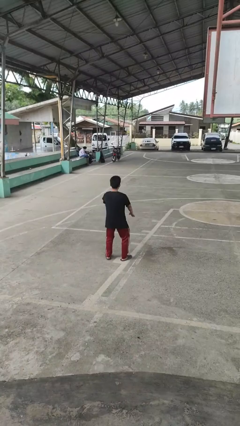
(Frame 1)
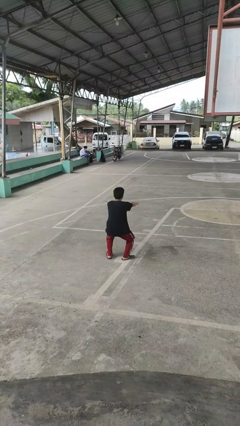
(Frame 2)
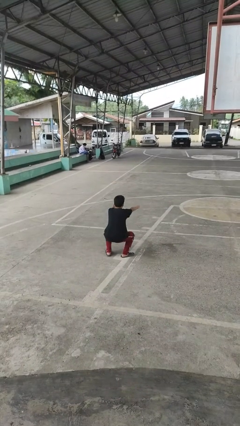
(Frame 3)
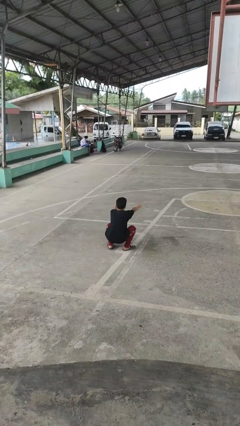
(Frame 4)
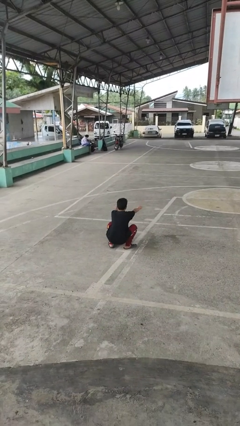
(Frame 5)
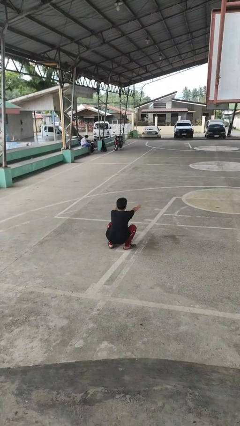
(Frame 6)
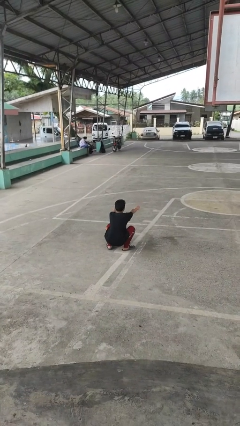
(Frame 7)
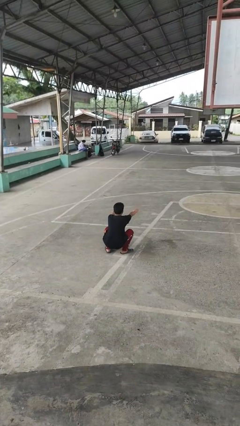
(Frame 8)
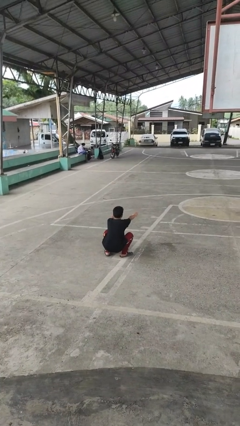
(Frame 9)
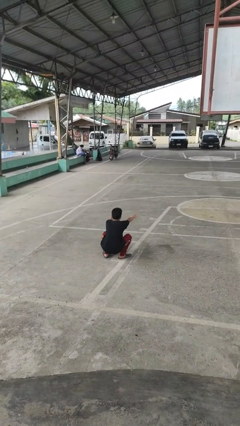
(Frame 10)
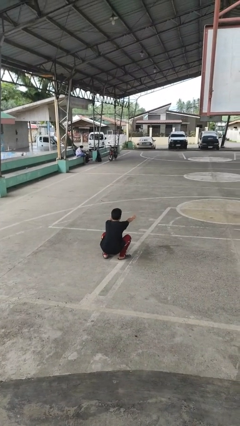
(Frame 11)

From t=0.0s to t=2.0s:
person squats

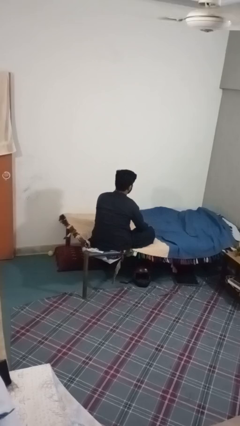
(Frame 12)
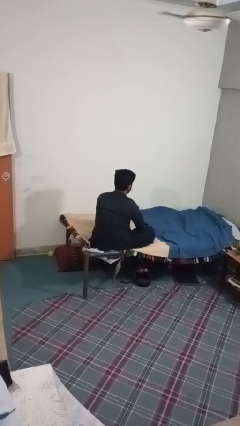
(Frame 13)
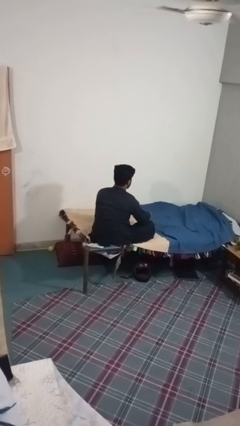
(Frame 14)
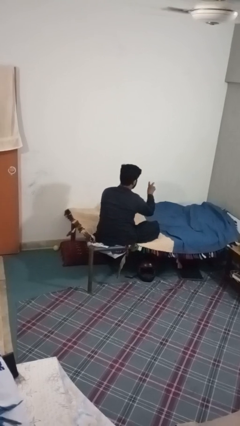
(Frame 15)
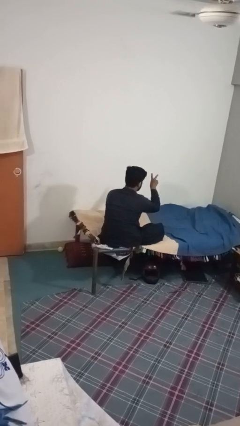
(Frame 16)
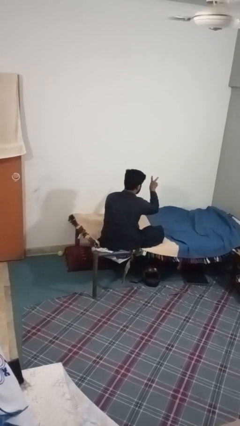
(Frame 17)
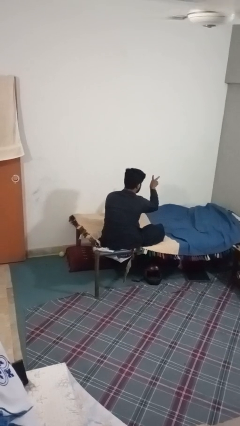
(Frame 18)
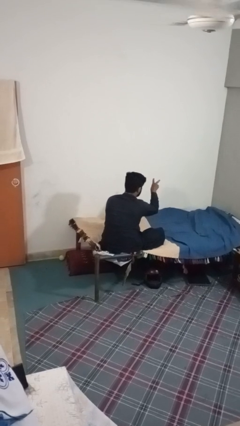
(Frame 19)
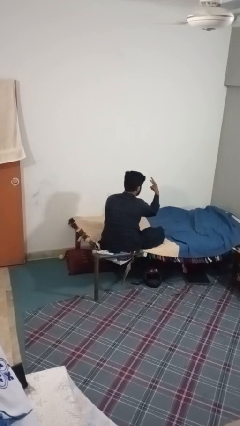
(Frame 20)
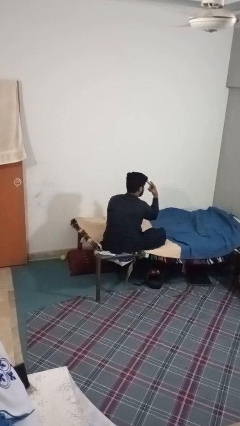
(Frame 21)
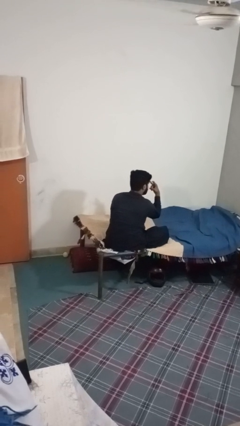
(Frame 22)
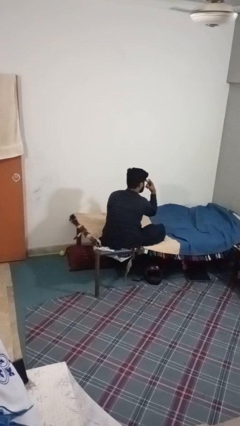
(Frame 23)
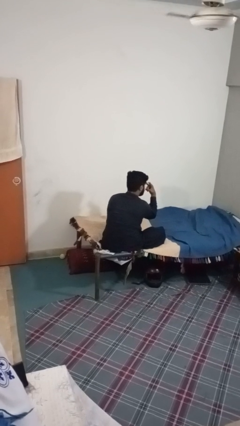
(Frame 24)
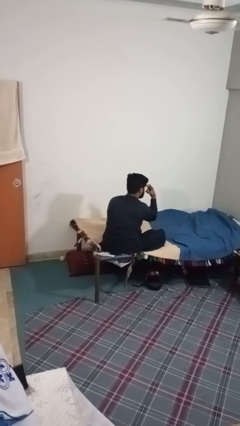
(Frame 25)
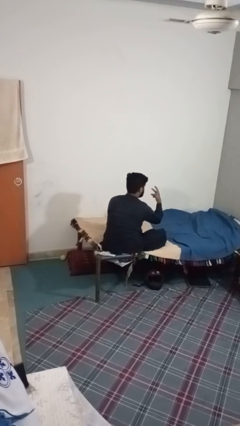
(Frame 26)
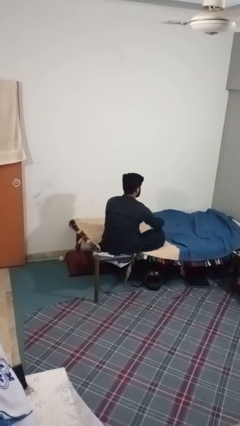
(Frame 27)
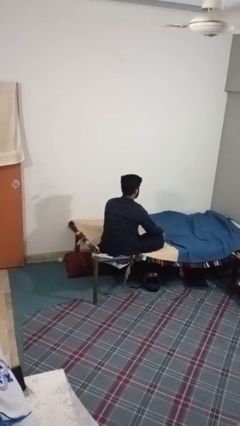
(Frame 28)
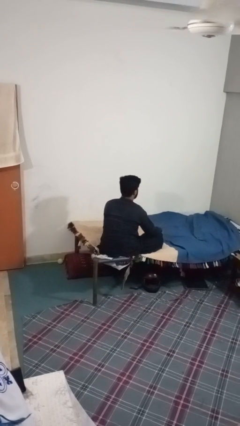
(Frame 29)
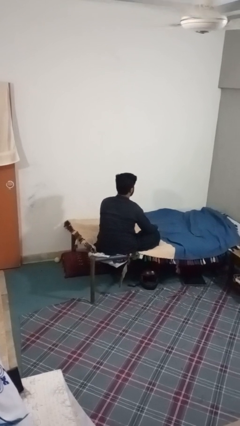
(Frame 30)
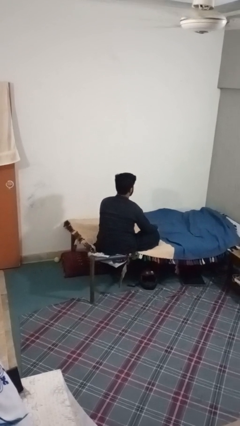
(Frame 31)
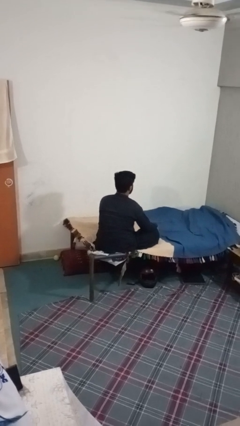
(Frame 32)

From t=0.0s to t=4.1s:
person gestures watch closely

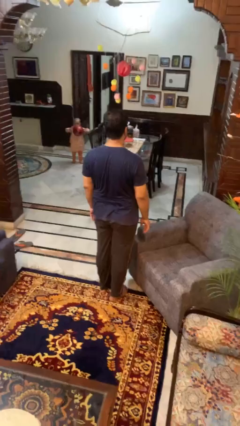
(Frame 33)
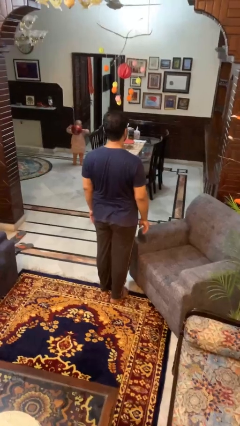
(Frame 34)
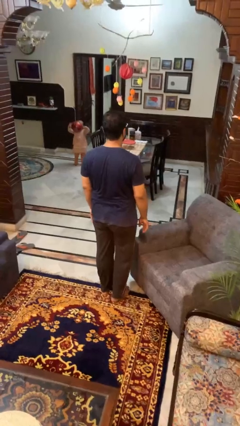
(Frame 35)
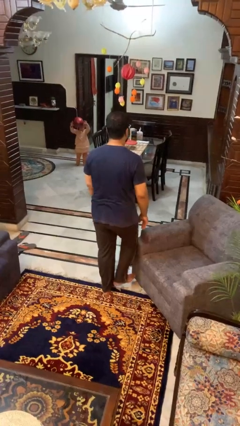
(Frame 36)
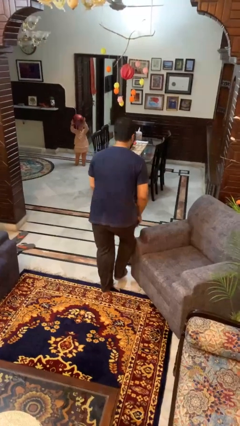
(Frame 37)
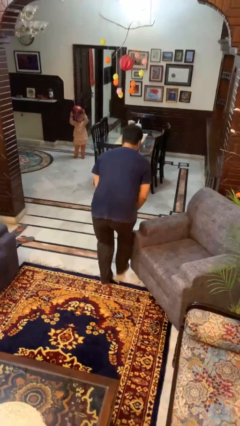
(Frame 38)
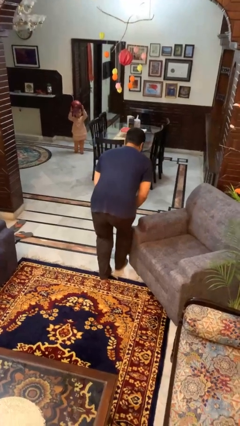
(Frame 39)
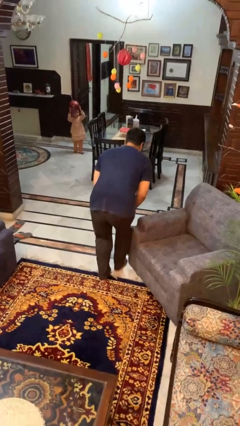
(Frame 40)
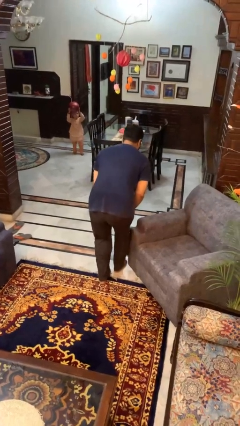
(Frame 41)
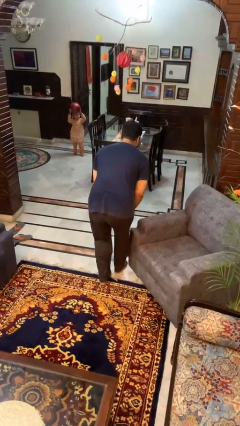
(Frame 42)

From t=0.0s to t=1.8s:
person stubs toe

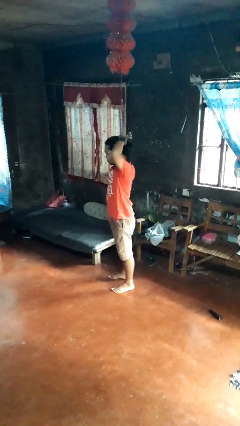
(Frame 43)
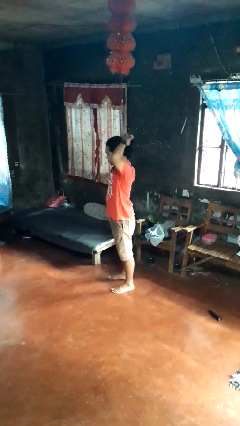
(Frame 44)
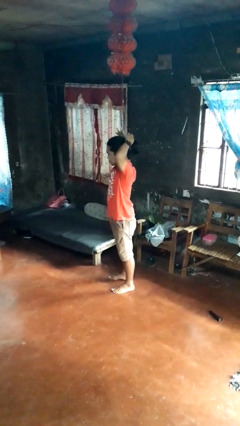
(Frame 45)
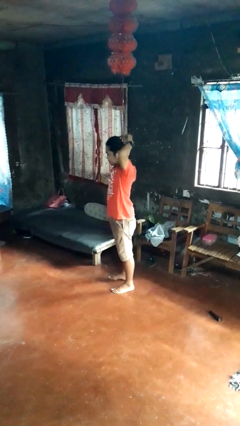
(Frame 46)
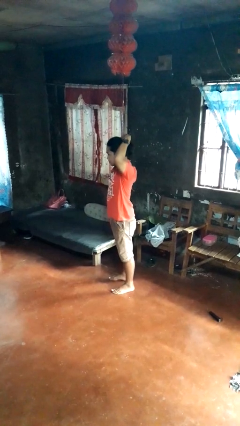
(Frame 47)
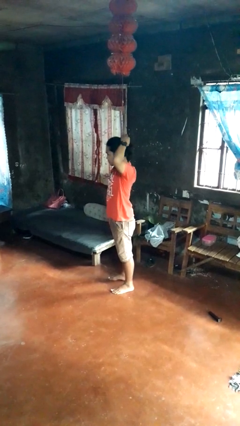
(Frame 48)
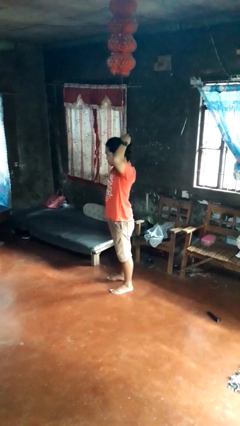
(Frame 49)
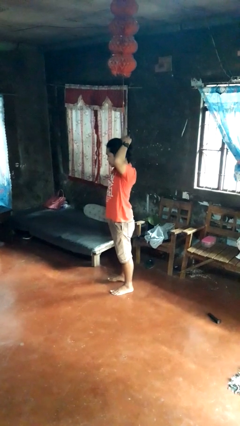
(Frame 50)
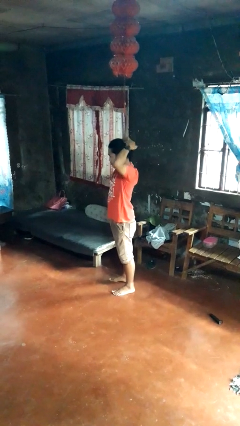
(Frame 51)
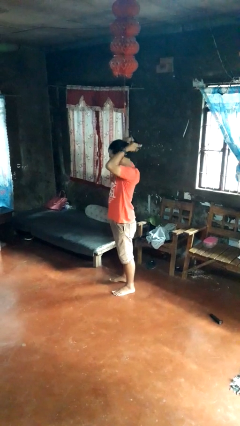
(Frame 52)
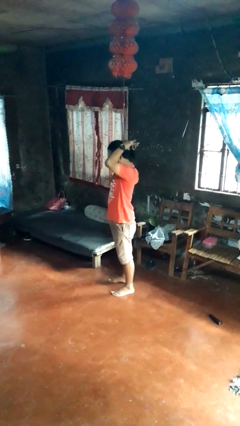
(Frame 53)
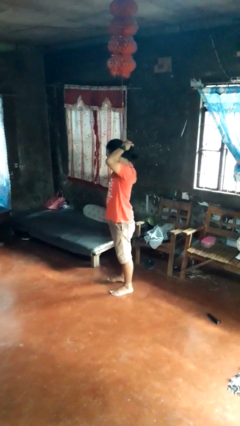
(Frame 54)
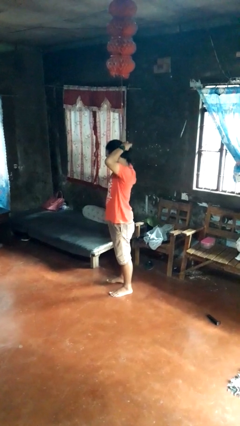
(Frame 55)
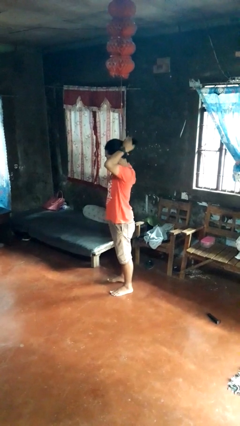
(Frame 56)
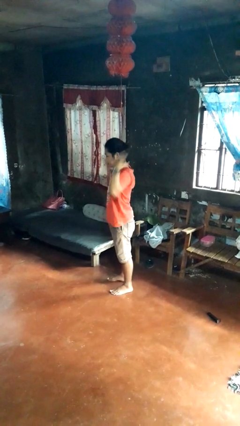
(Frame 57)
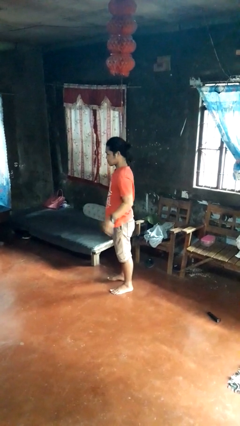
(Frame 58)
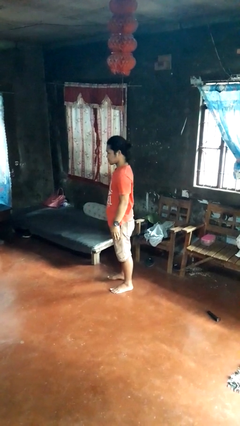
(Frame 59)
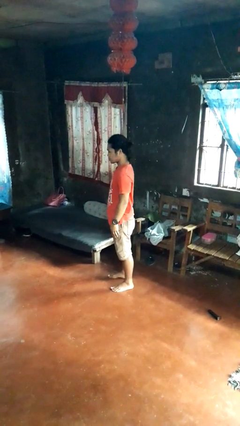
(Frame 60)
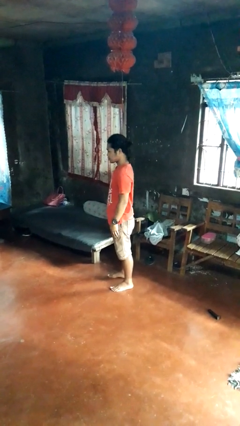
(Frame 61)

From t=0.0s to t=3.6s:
person puts hair in ponytail

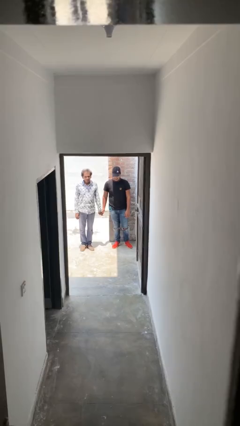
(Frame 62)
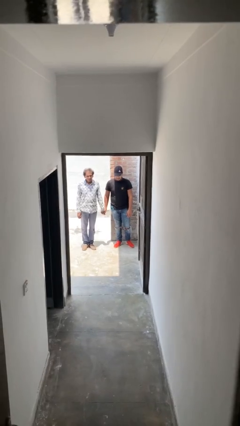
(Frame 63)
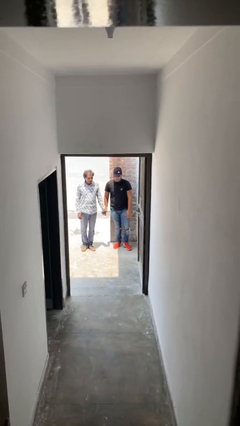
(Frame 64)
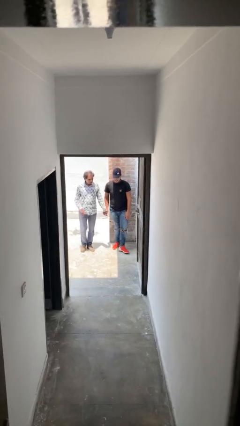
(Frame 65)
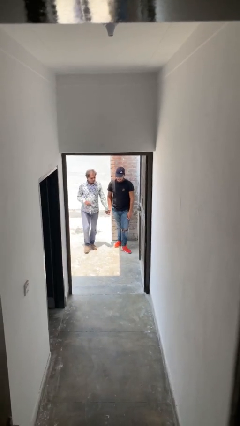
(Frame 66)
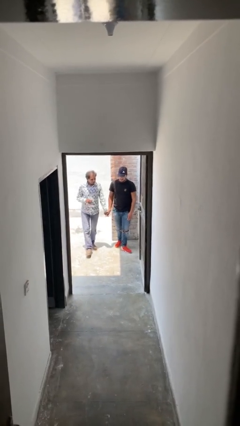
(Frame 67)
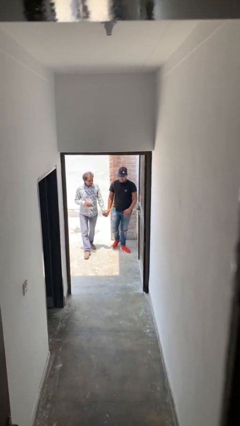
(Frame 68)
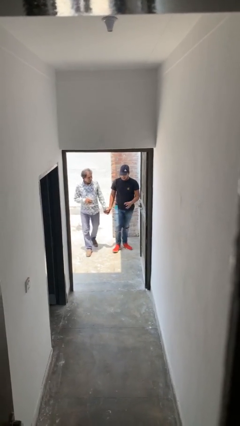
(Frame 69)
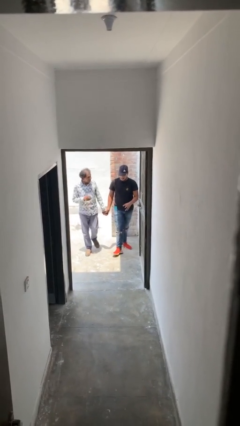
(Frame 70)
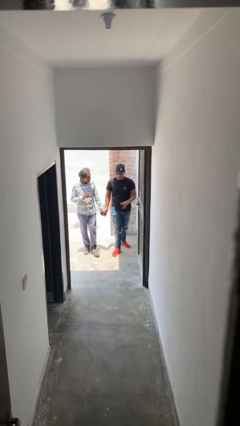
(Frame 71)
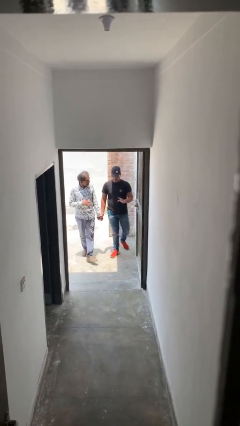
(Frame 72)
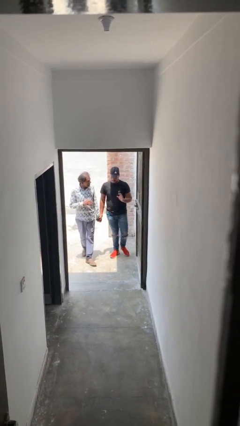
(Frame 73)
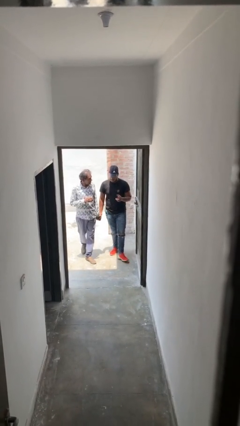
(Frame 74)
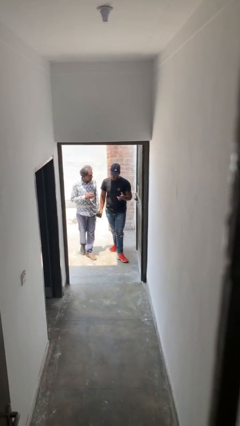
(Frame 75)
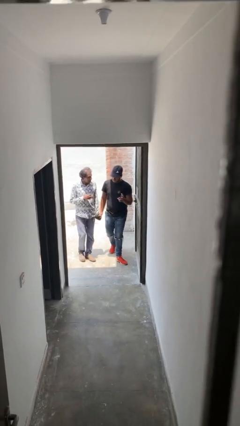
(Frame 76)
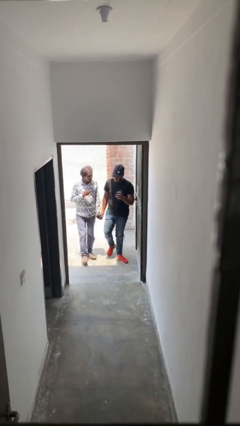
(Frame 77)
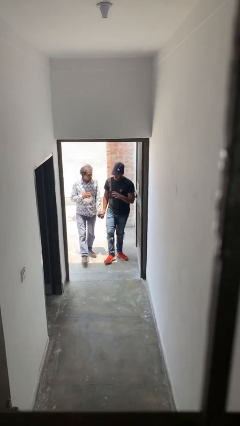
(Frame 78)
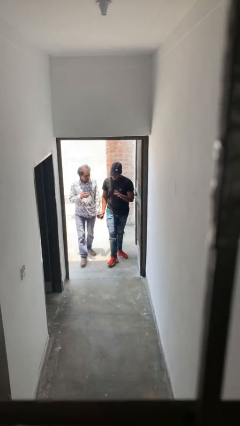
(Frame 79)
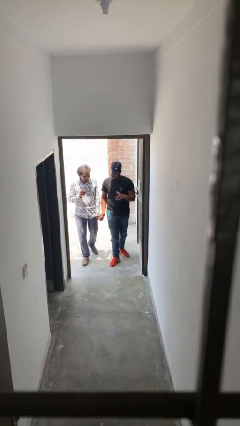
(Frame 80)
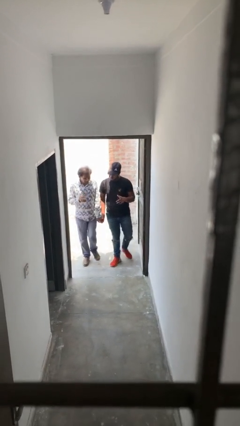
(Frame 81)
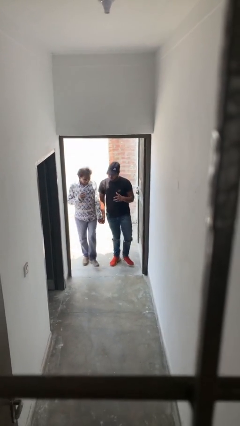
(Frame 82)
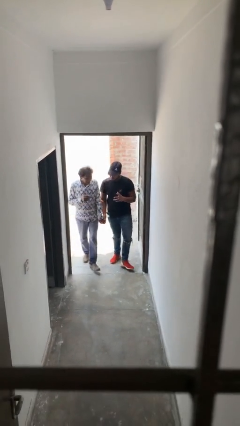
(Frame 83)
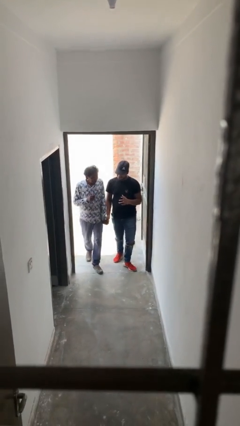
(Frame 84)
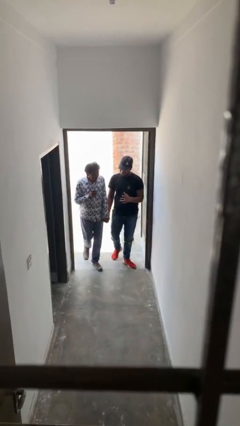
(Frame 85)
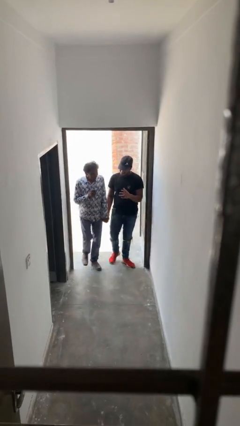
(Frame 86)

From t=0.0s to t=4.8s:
person holds hand

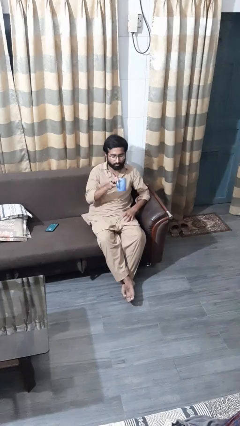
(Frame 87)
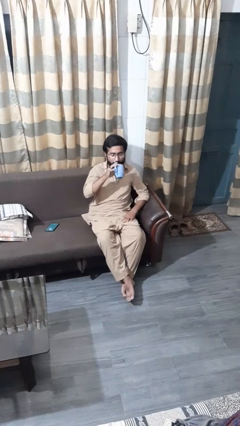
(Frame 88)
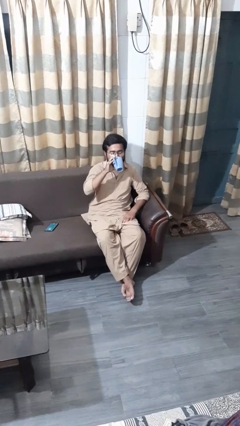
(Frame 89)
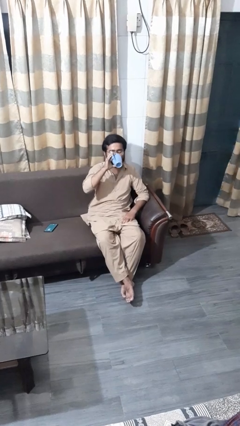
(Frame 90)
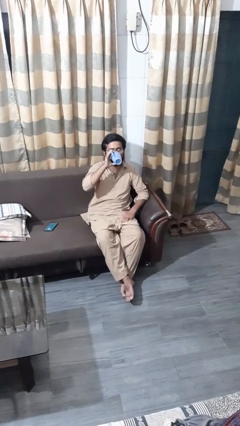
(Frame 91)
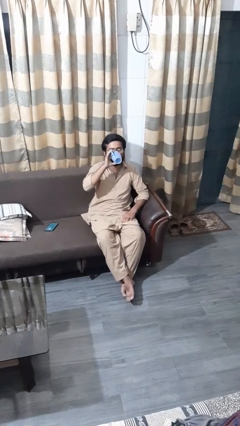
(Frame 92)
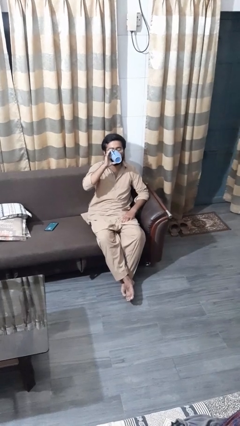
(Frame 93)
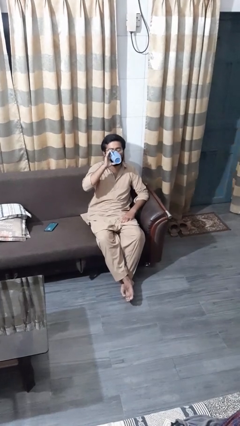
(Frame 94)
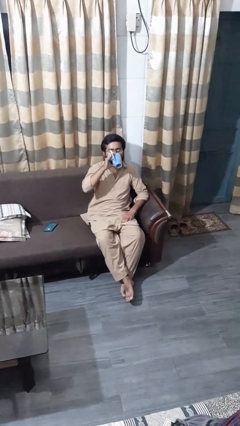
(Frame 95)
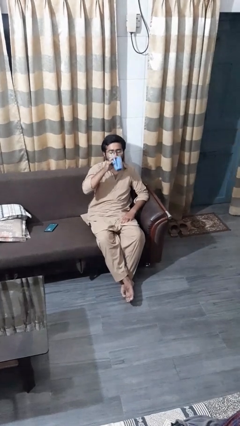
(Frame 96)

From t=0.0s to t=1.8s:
person drinks from mug
